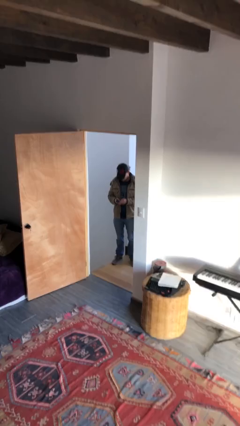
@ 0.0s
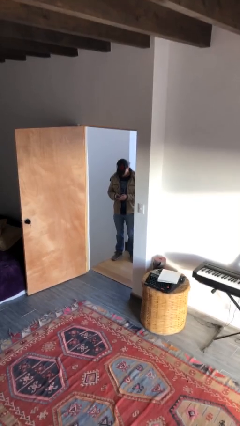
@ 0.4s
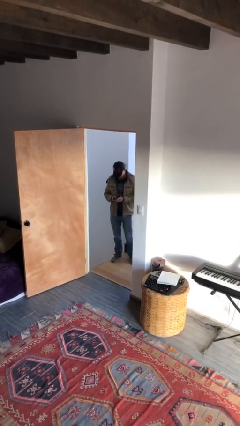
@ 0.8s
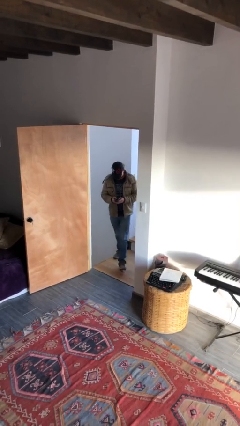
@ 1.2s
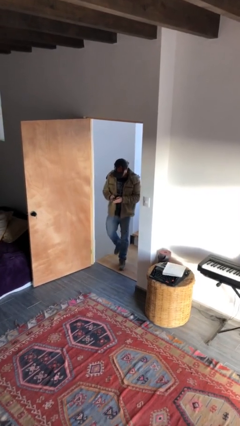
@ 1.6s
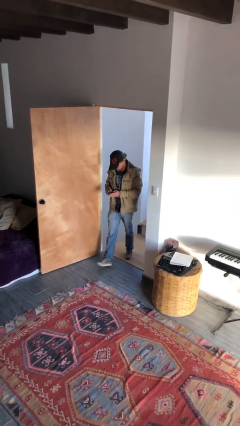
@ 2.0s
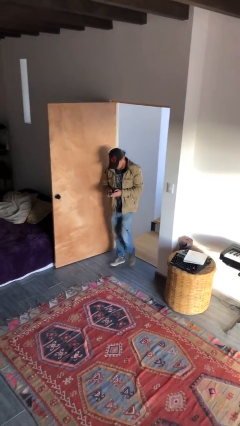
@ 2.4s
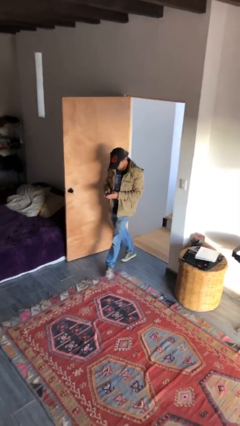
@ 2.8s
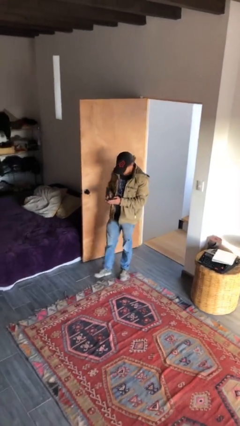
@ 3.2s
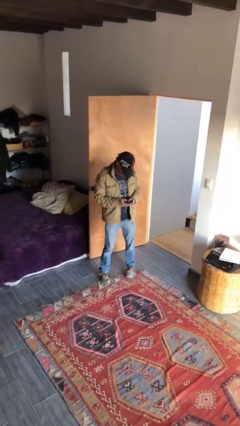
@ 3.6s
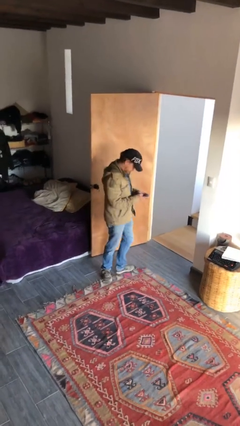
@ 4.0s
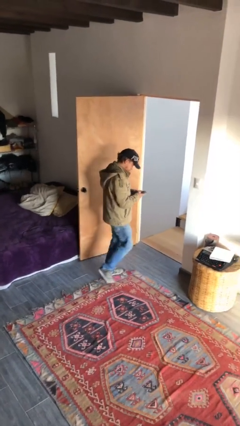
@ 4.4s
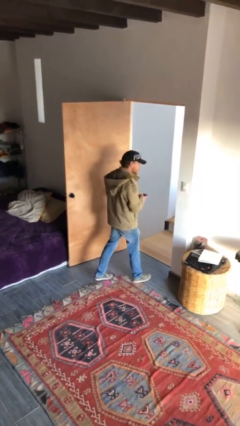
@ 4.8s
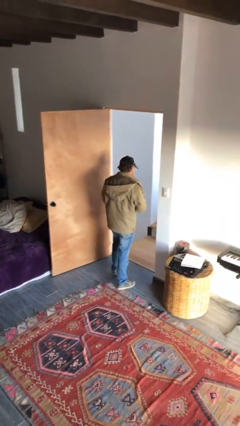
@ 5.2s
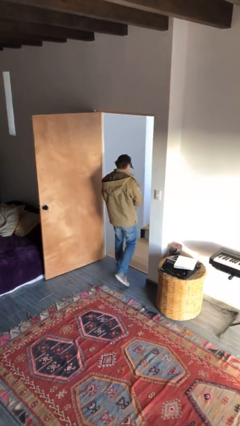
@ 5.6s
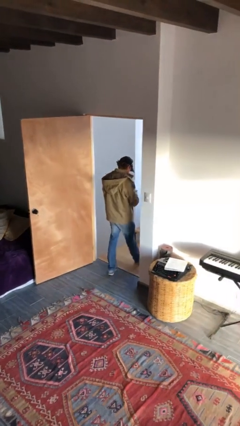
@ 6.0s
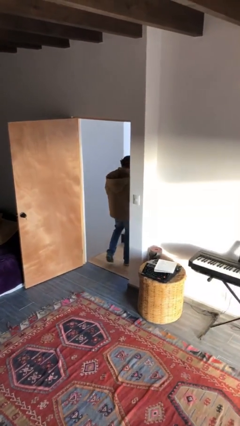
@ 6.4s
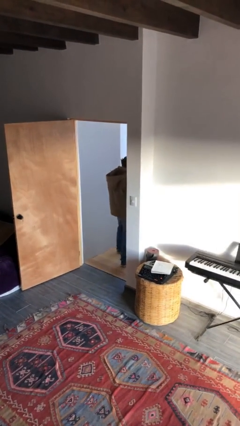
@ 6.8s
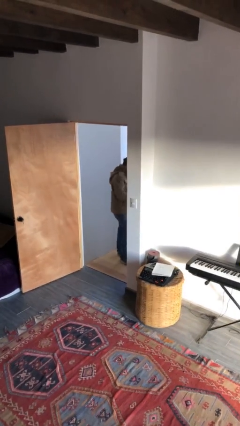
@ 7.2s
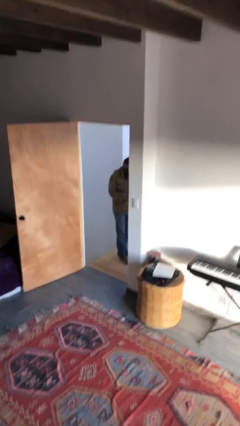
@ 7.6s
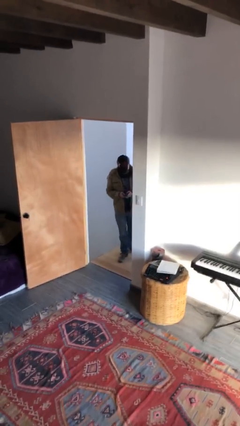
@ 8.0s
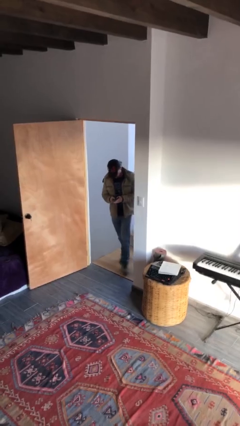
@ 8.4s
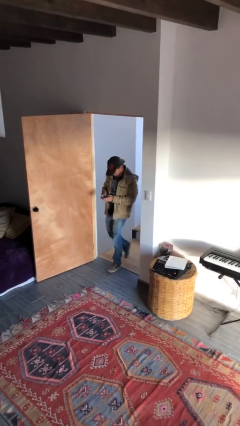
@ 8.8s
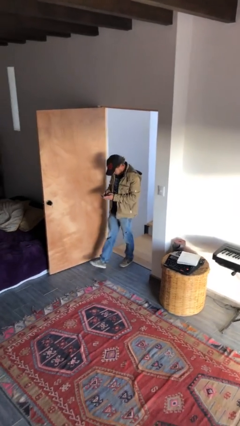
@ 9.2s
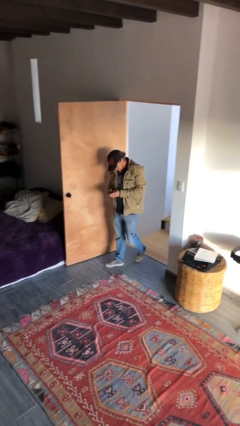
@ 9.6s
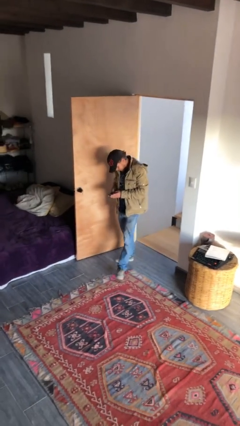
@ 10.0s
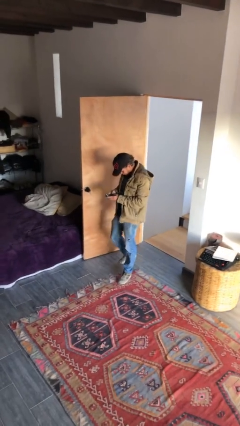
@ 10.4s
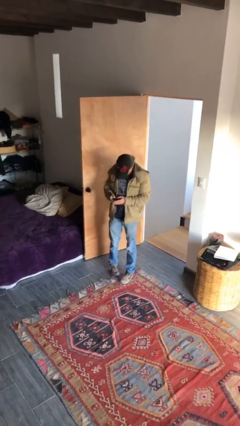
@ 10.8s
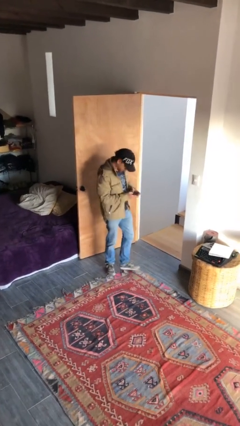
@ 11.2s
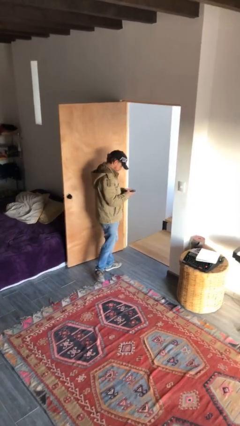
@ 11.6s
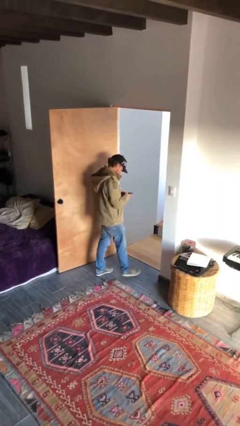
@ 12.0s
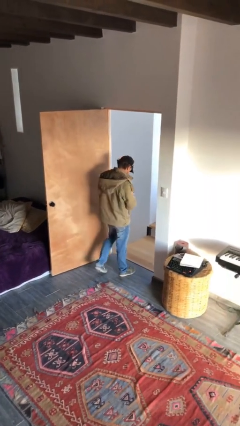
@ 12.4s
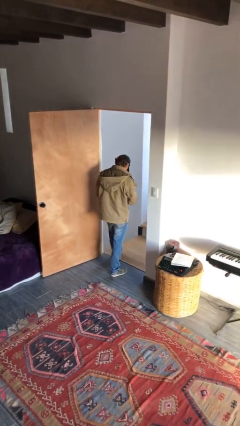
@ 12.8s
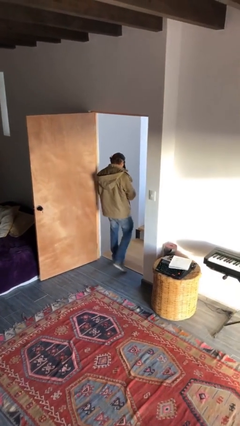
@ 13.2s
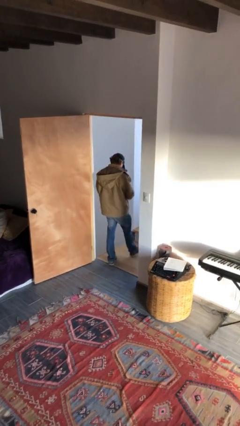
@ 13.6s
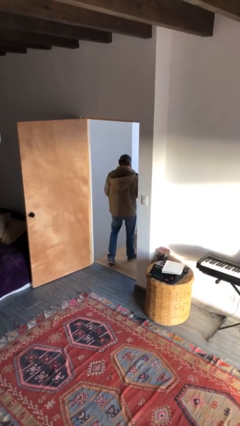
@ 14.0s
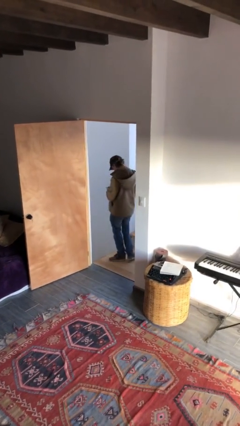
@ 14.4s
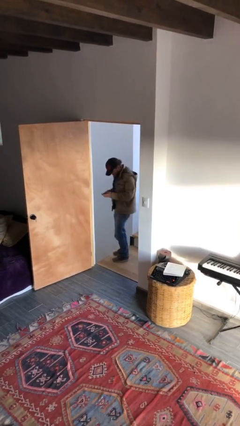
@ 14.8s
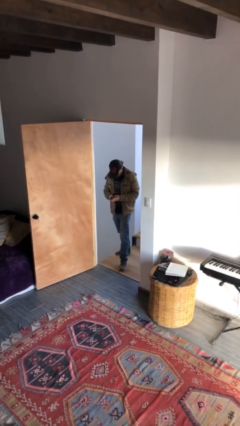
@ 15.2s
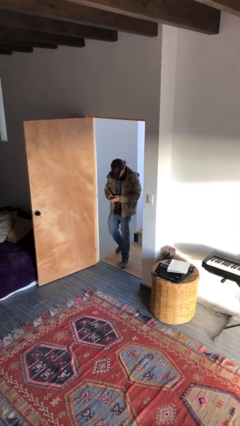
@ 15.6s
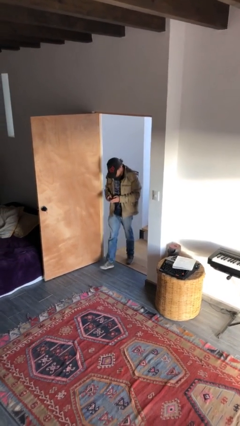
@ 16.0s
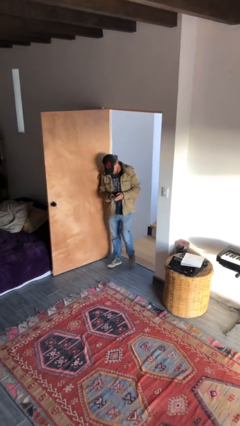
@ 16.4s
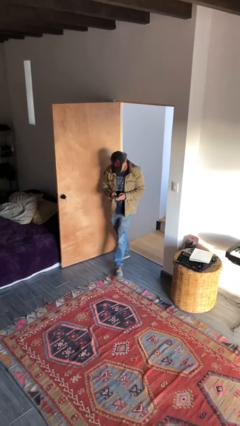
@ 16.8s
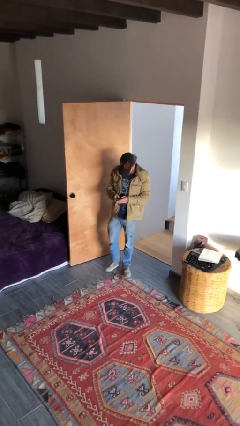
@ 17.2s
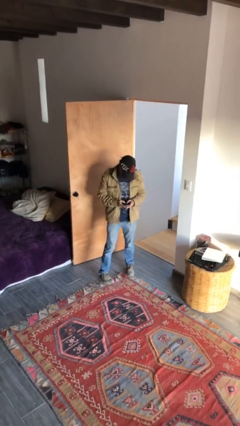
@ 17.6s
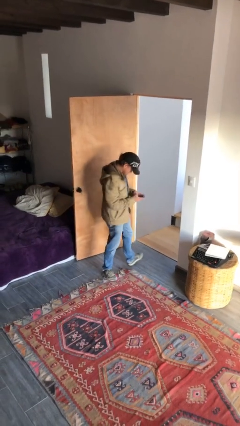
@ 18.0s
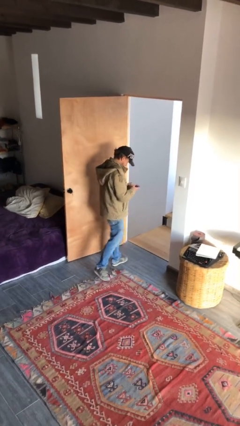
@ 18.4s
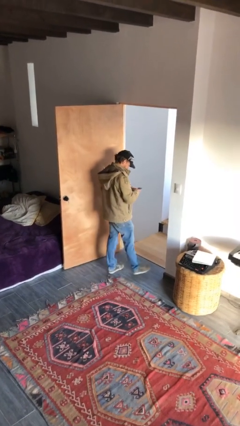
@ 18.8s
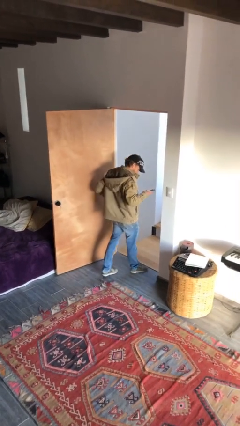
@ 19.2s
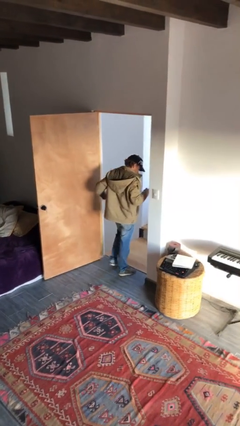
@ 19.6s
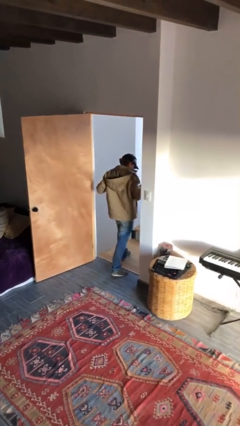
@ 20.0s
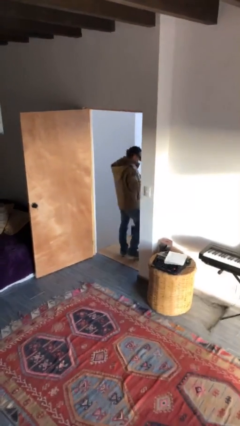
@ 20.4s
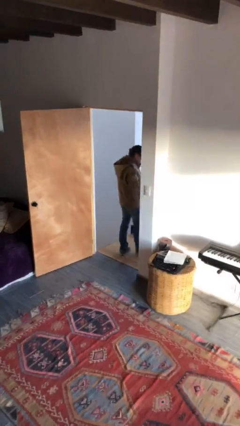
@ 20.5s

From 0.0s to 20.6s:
person texts on phone

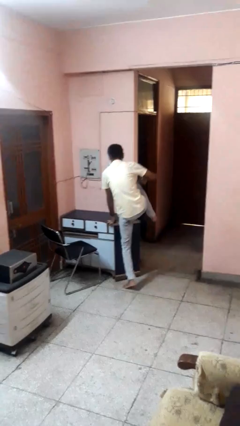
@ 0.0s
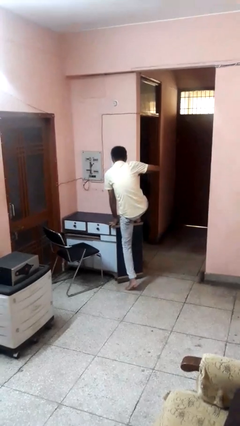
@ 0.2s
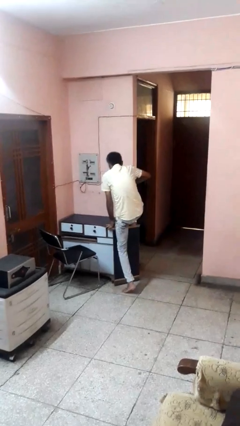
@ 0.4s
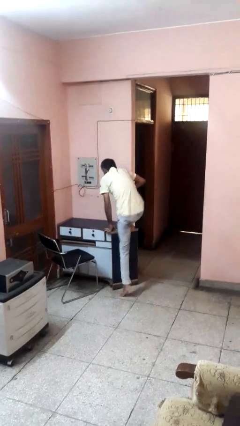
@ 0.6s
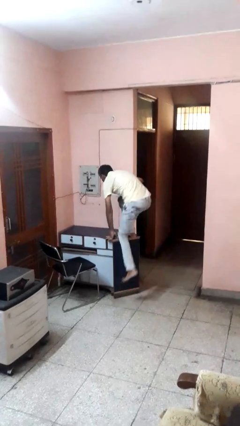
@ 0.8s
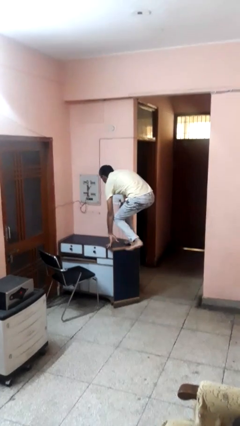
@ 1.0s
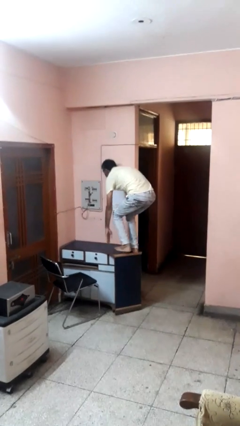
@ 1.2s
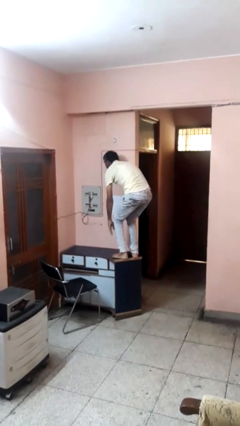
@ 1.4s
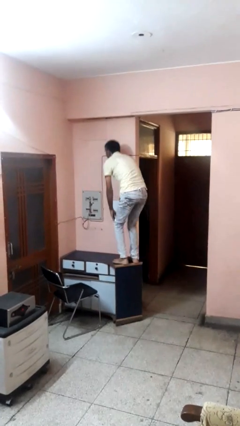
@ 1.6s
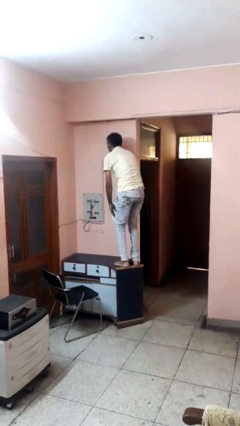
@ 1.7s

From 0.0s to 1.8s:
person climbs on table

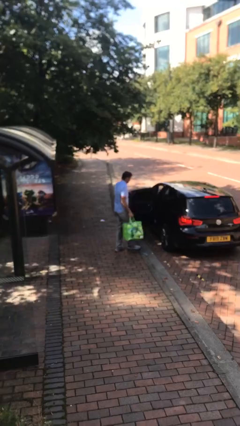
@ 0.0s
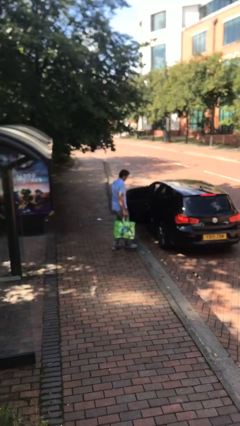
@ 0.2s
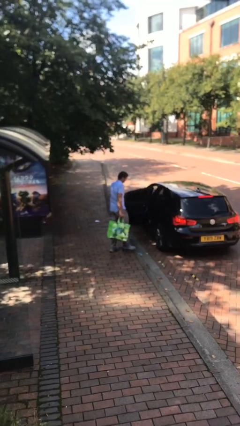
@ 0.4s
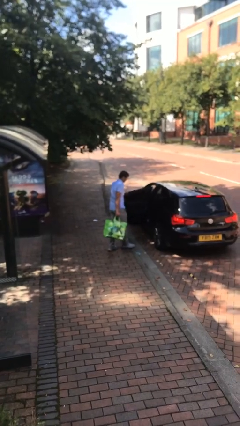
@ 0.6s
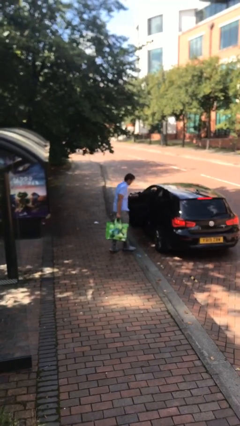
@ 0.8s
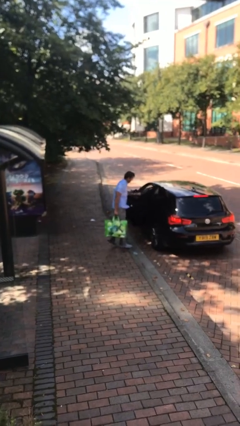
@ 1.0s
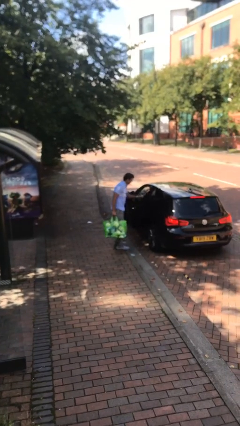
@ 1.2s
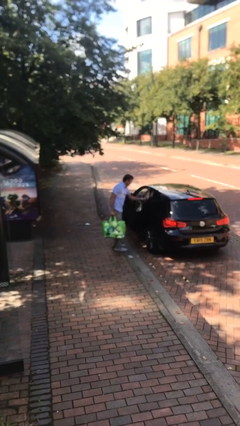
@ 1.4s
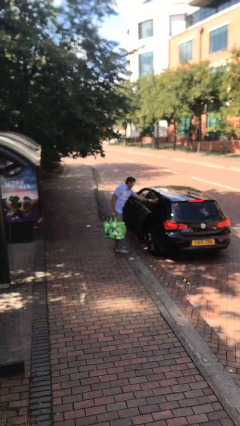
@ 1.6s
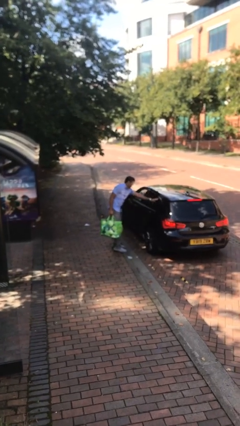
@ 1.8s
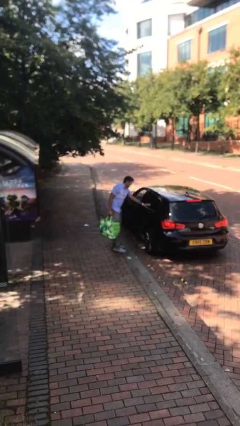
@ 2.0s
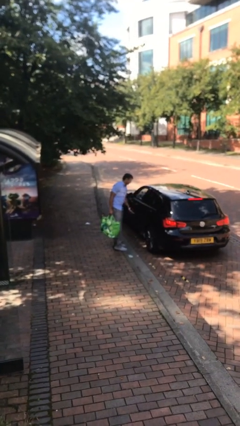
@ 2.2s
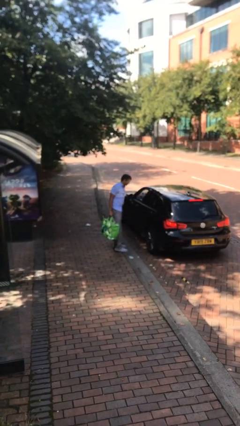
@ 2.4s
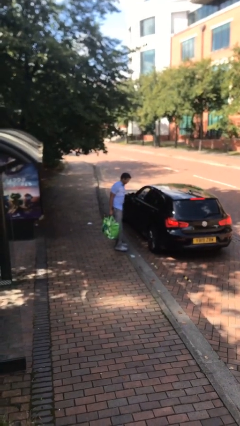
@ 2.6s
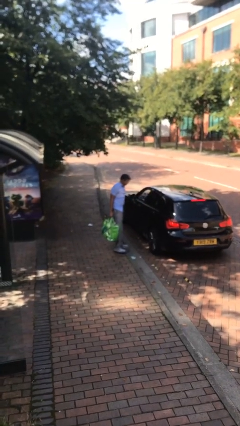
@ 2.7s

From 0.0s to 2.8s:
person closes car door

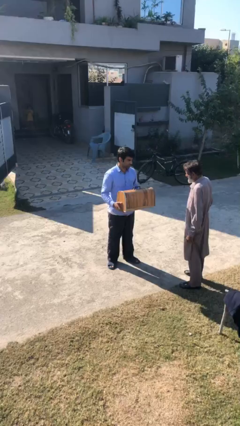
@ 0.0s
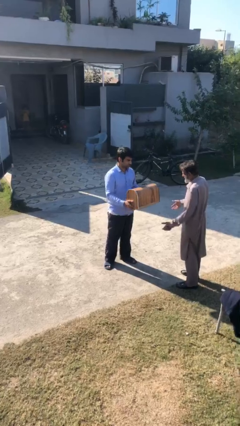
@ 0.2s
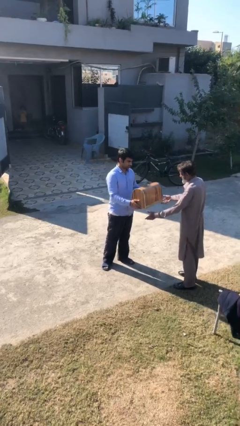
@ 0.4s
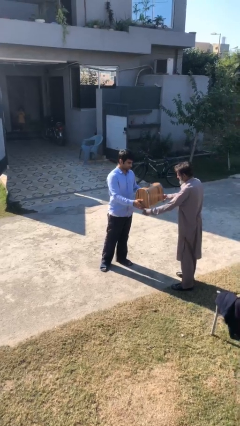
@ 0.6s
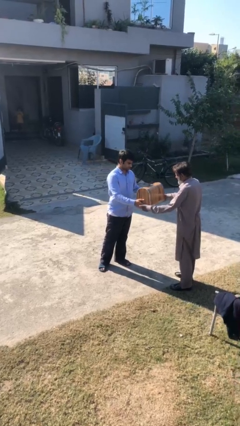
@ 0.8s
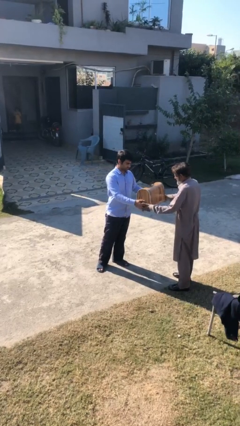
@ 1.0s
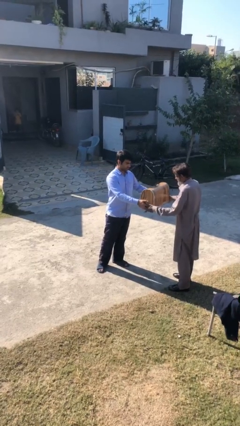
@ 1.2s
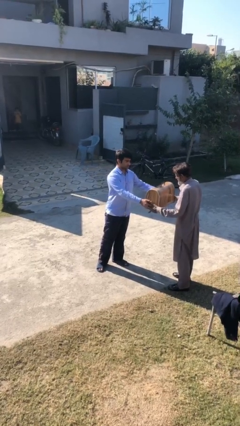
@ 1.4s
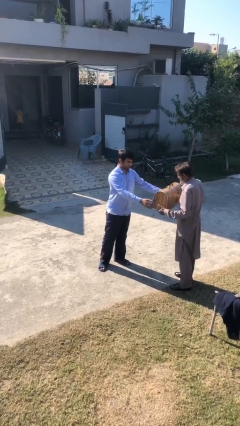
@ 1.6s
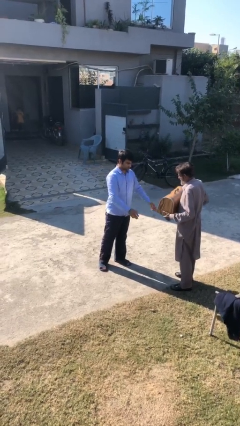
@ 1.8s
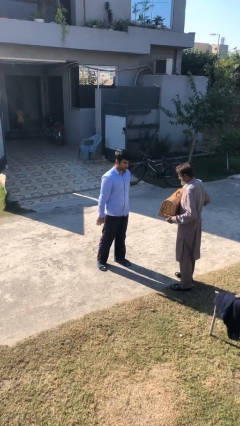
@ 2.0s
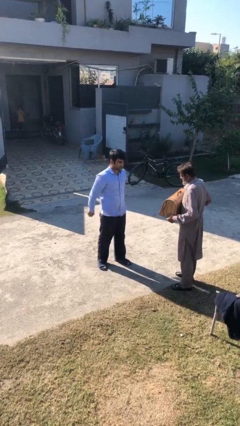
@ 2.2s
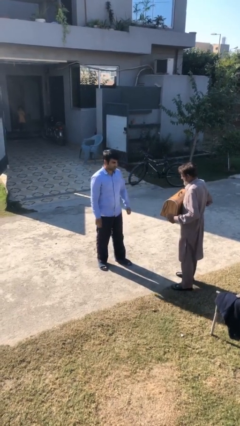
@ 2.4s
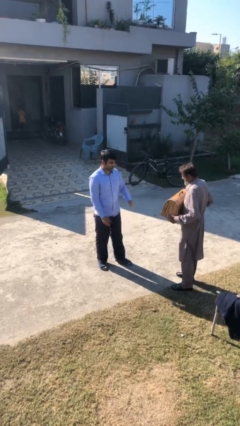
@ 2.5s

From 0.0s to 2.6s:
person transfers object to person
